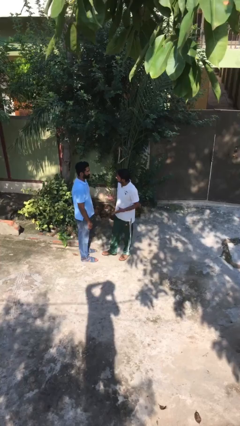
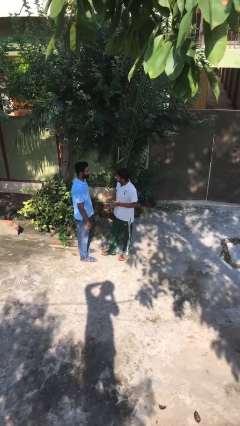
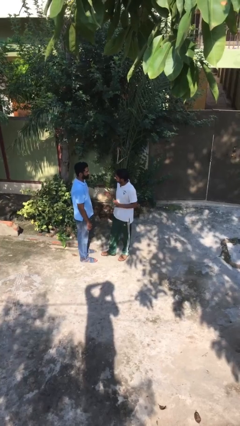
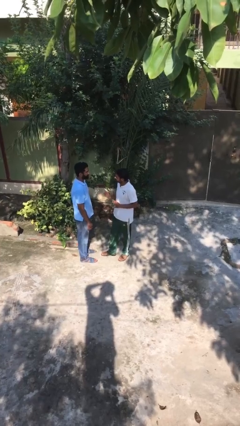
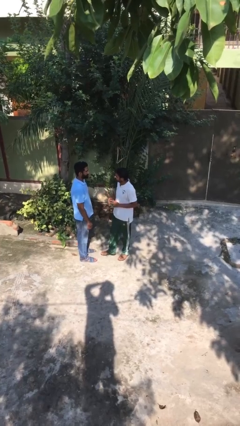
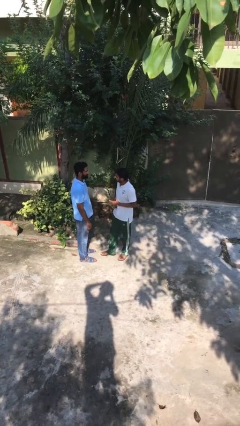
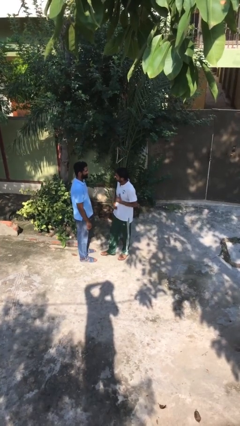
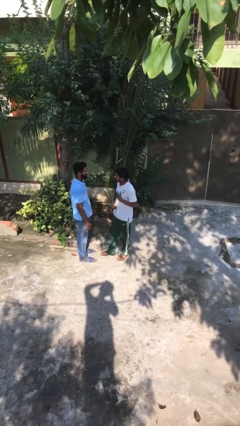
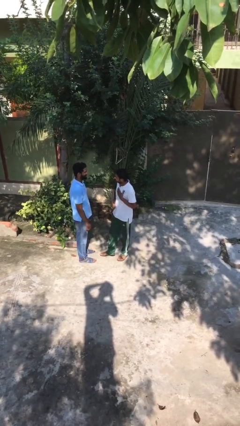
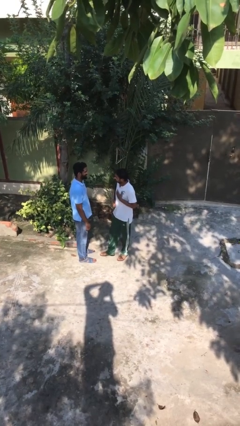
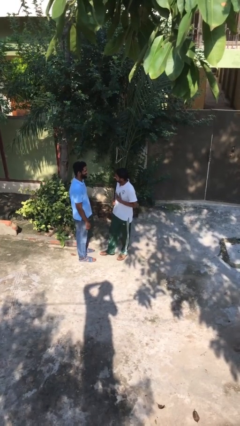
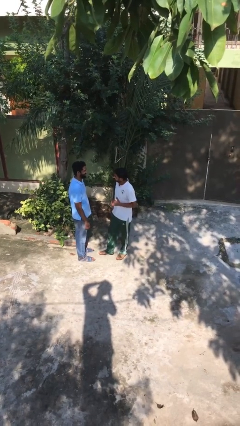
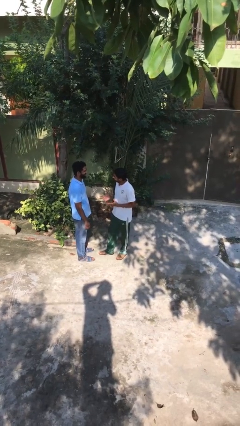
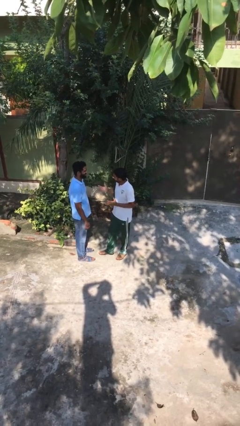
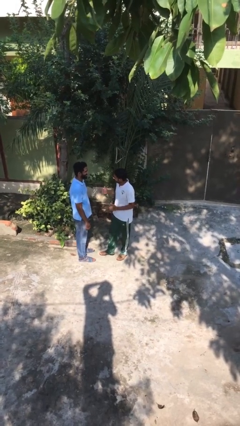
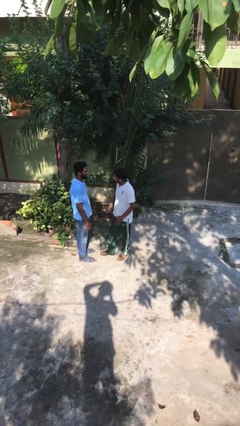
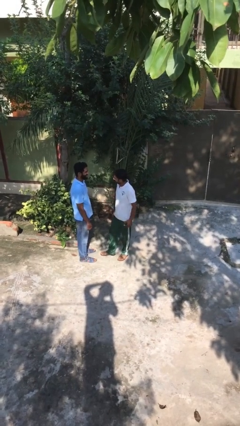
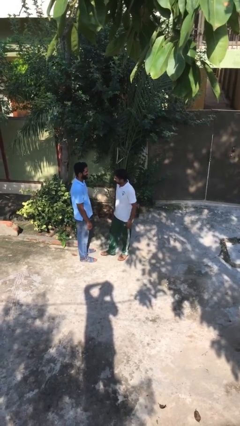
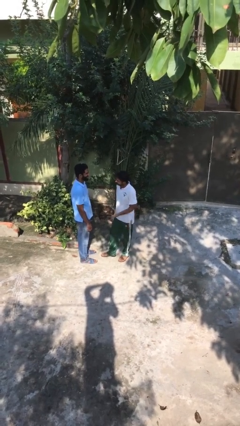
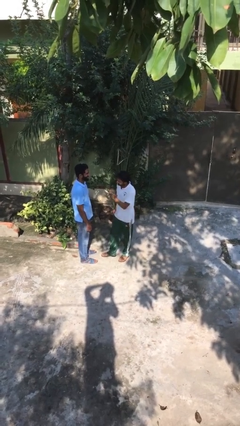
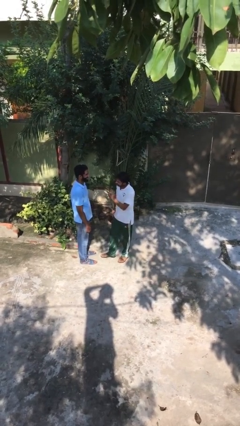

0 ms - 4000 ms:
person talks to person

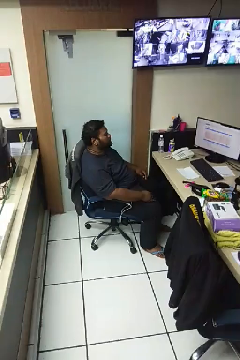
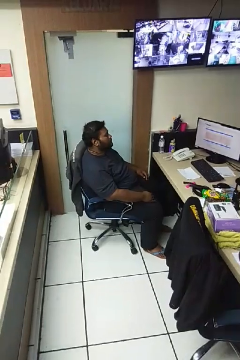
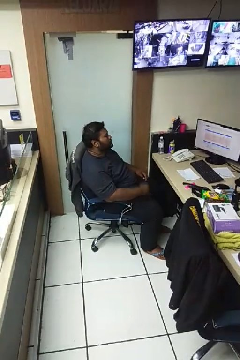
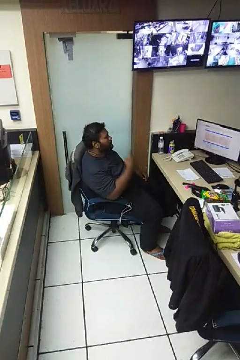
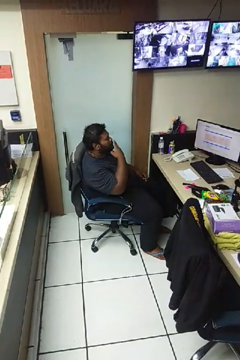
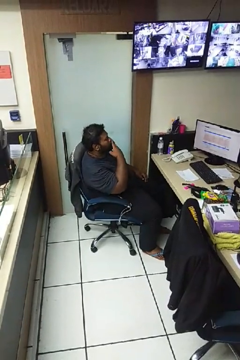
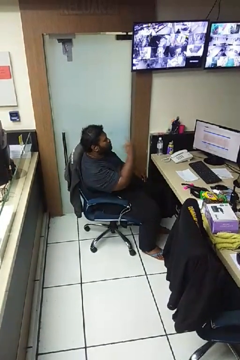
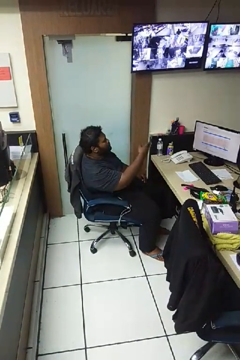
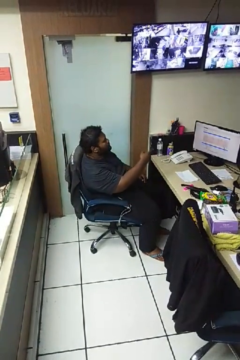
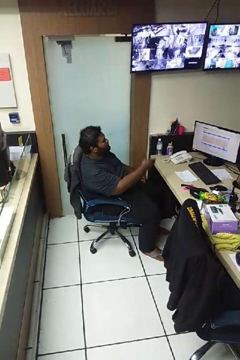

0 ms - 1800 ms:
person gestures blow kiss

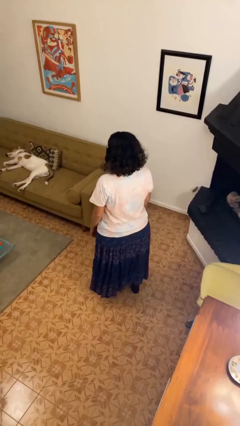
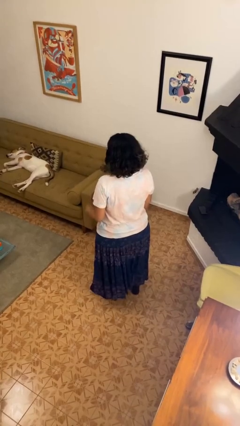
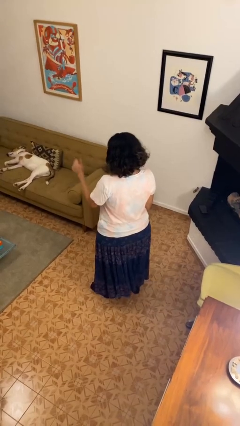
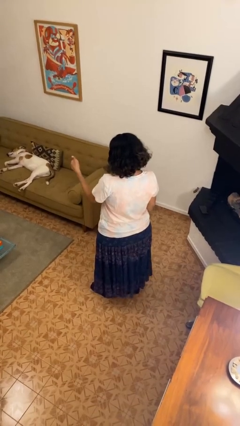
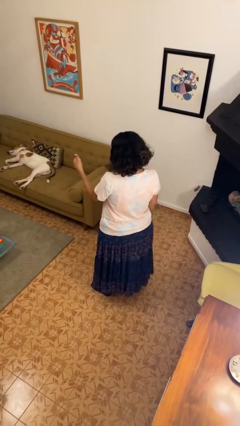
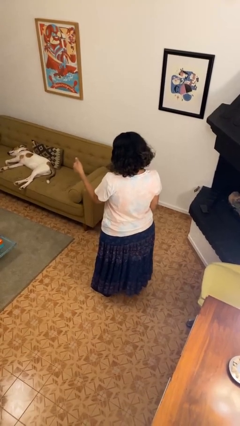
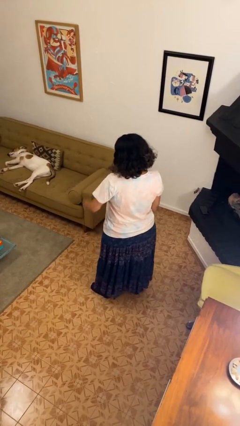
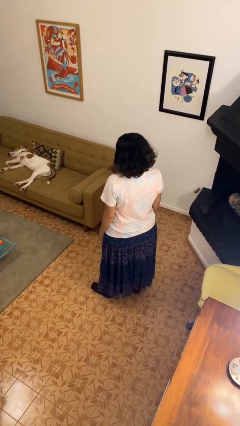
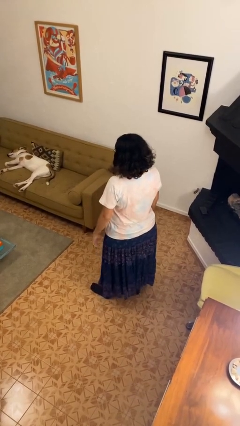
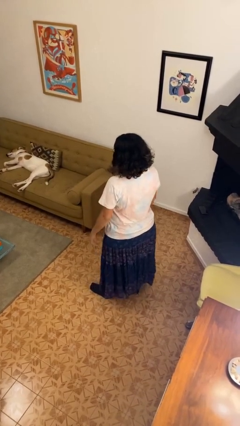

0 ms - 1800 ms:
person gestures thumbs up

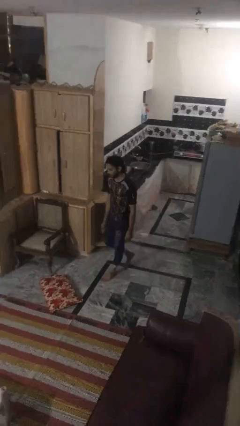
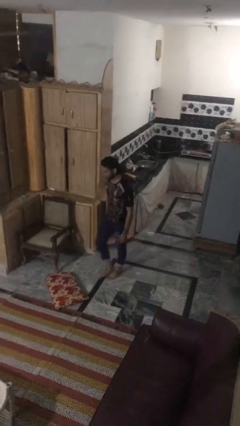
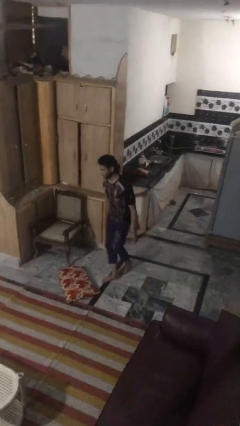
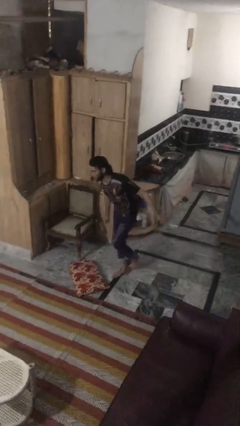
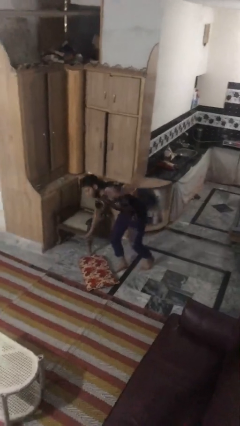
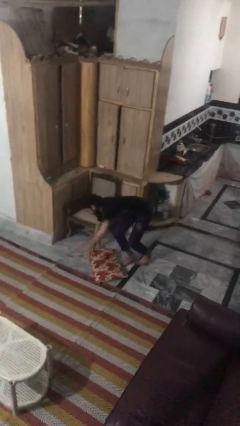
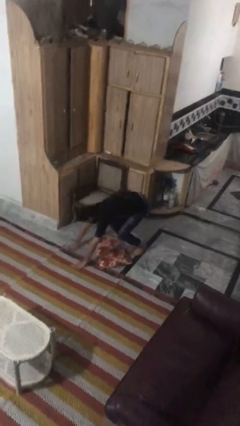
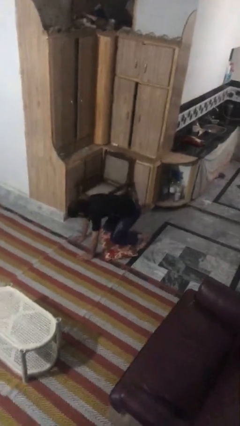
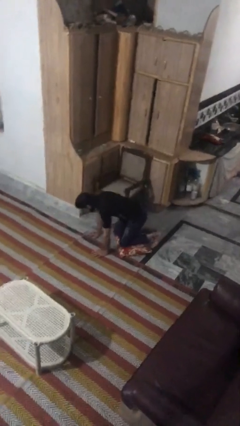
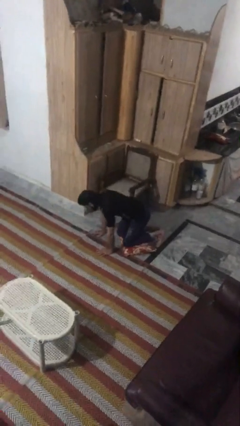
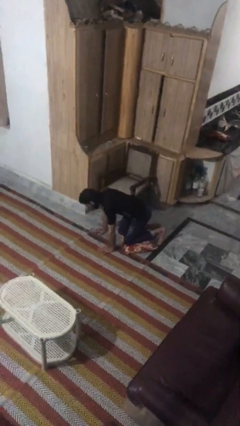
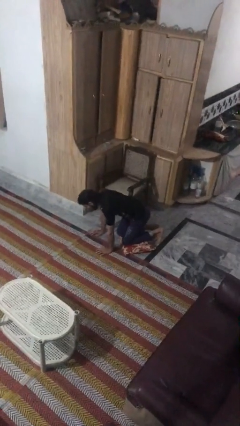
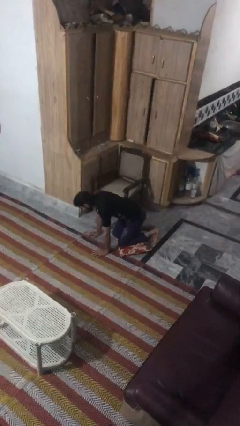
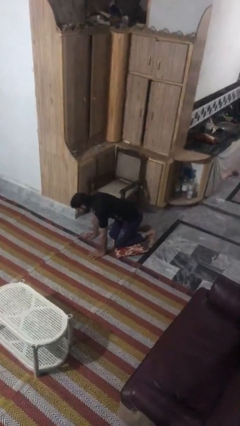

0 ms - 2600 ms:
person trips on object on floor

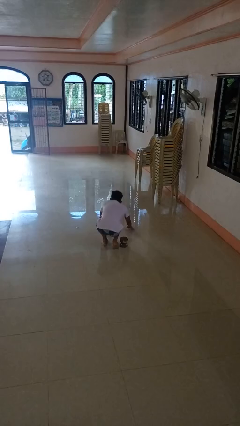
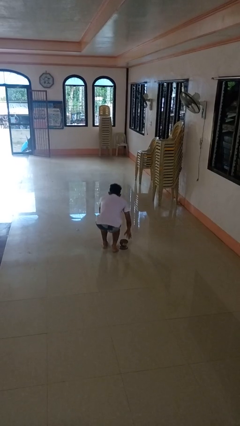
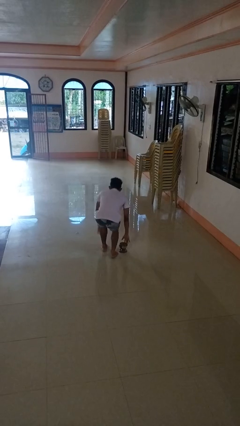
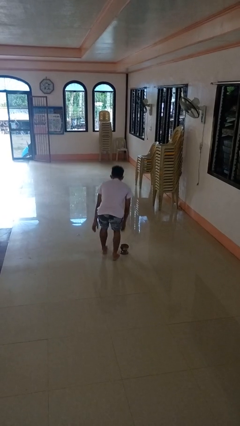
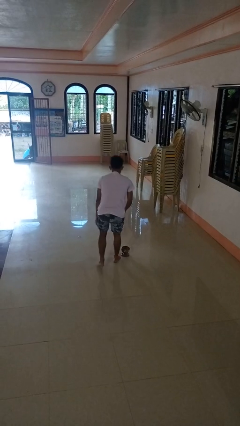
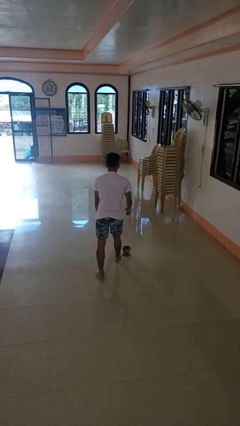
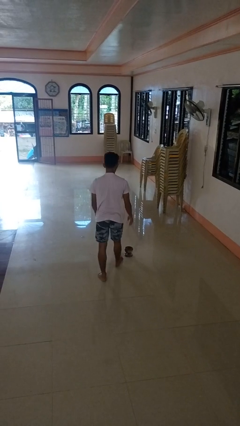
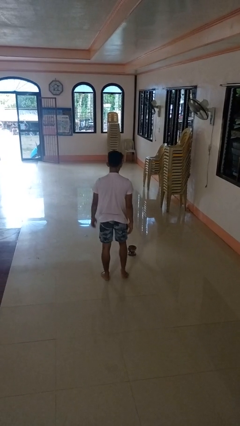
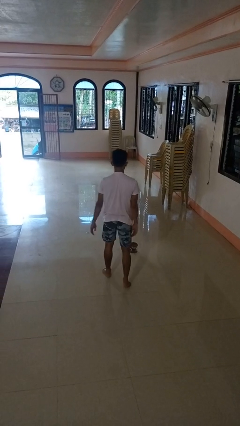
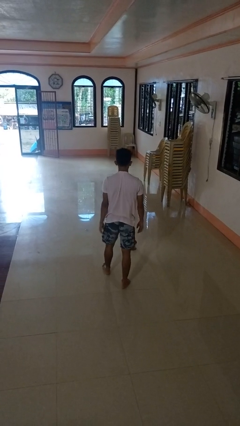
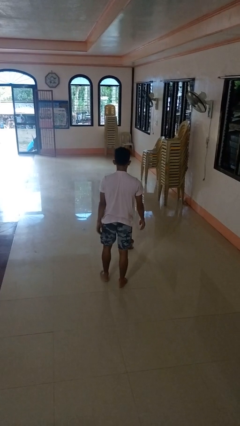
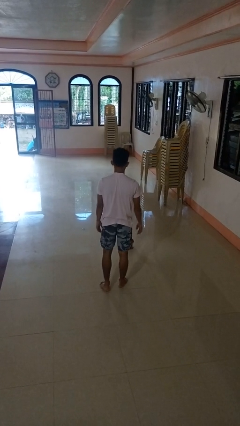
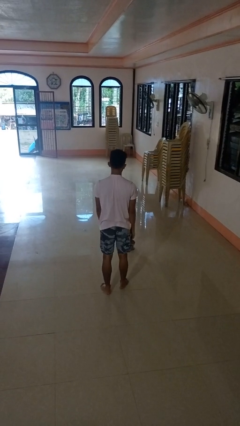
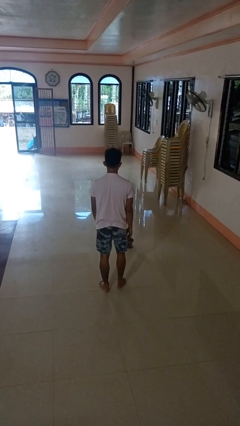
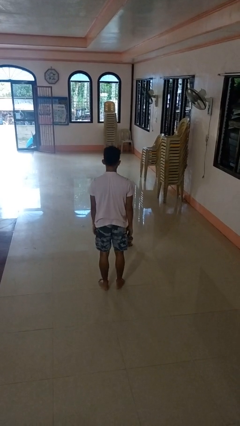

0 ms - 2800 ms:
person stands up from floor

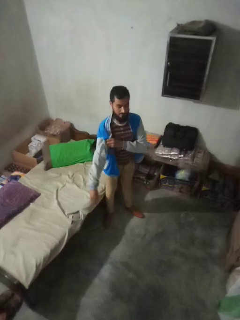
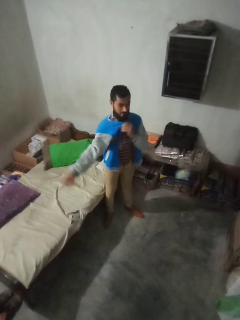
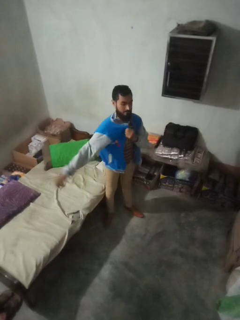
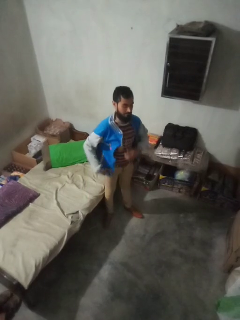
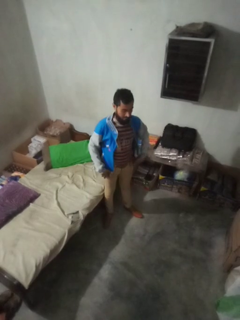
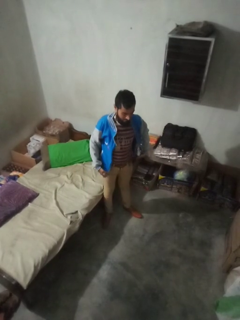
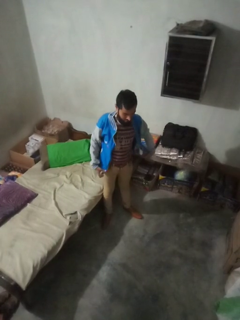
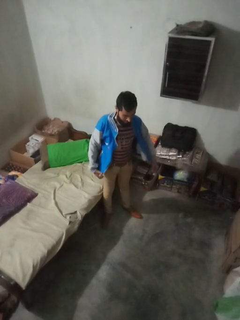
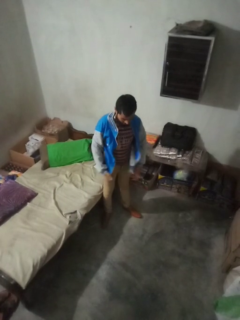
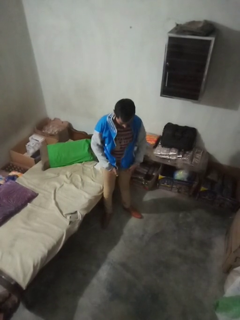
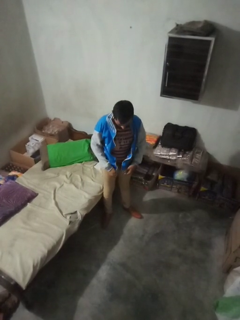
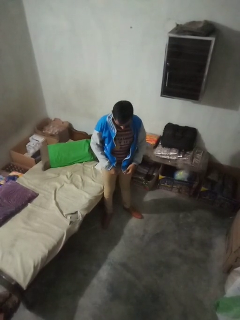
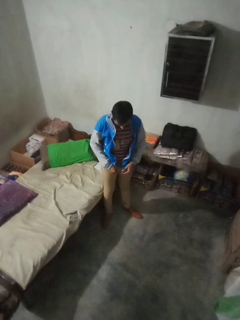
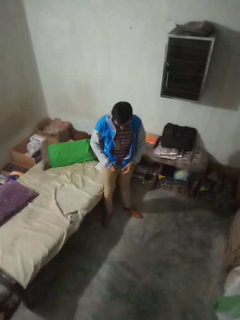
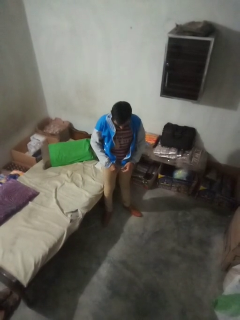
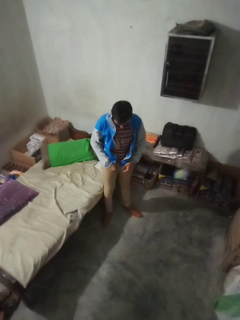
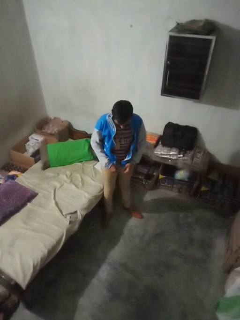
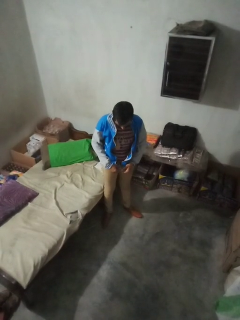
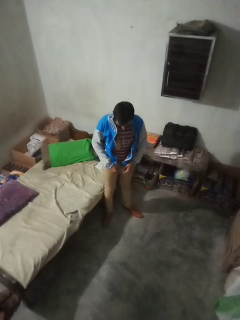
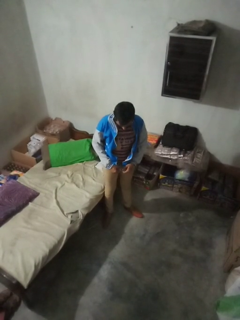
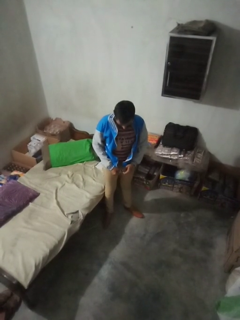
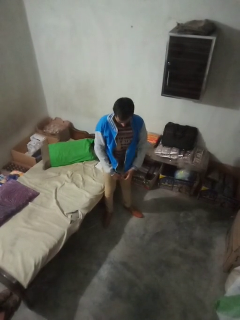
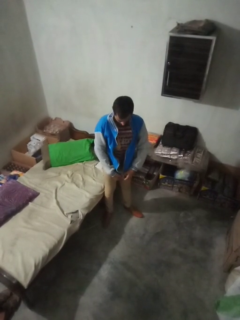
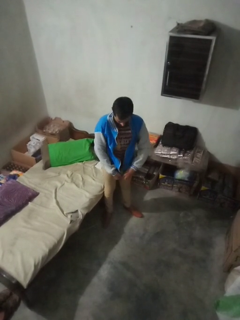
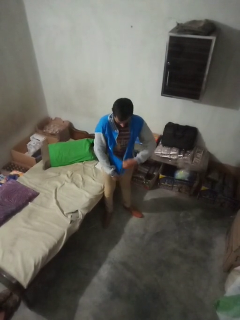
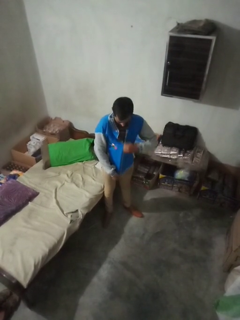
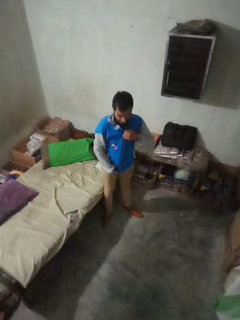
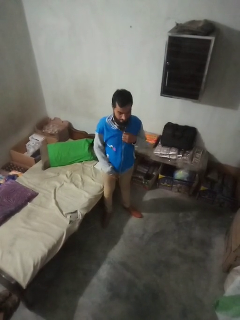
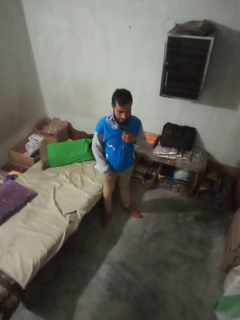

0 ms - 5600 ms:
person zips up jacket

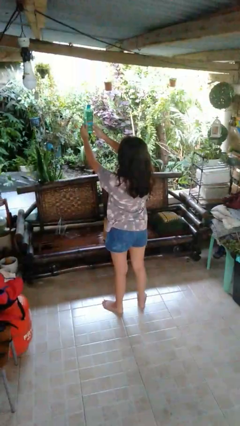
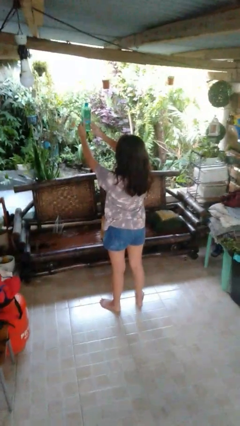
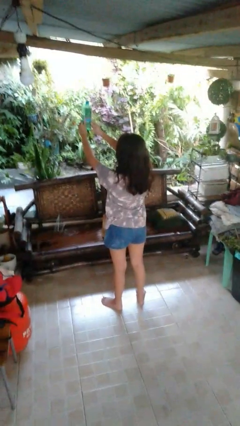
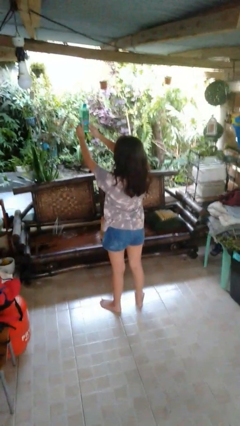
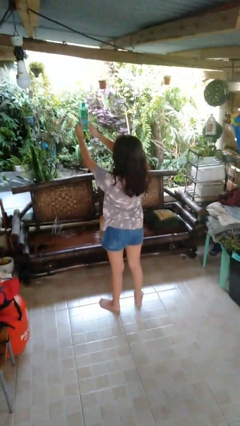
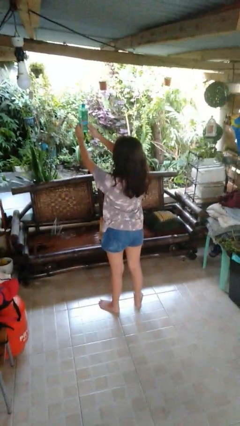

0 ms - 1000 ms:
person drops object
